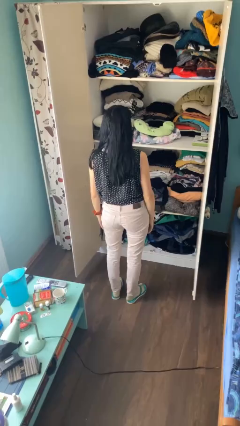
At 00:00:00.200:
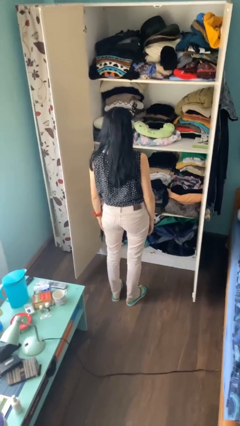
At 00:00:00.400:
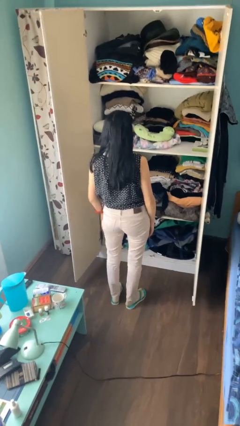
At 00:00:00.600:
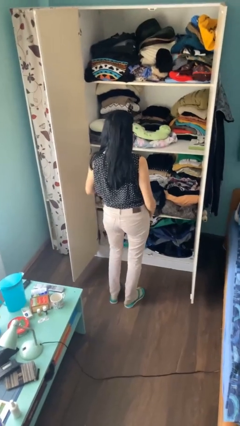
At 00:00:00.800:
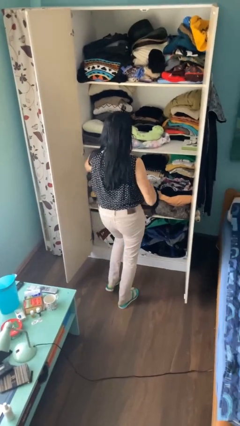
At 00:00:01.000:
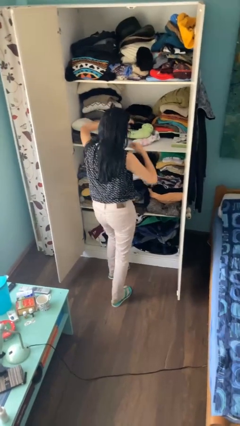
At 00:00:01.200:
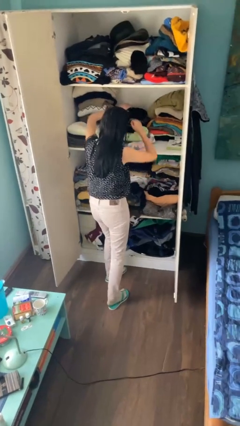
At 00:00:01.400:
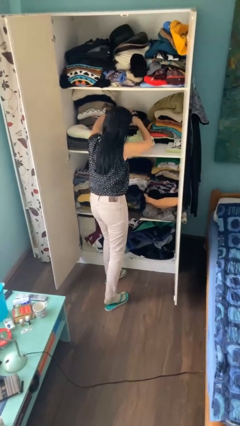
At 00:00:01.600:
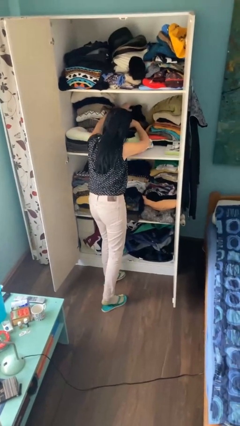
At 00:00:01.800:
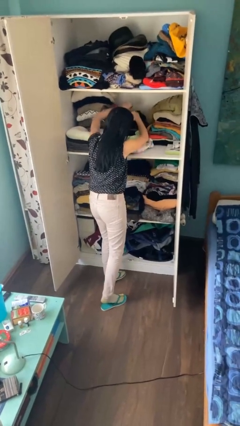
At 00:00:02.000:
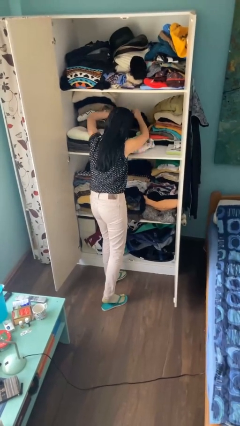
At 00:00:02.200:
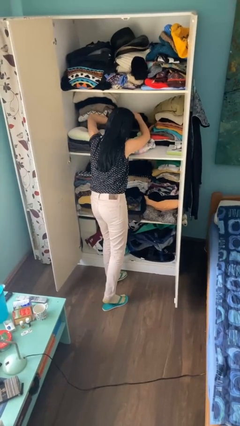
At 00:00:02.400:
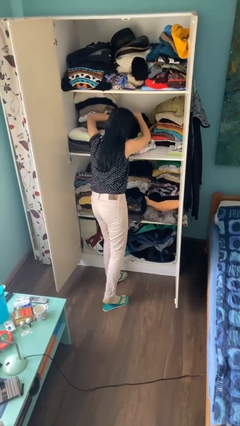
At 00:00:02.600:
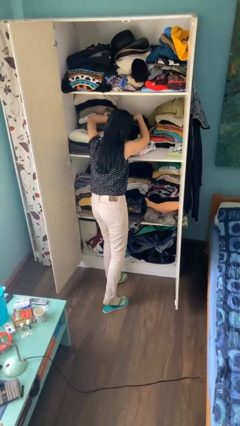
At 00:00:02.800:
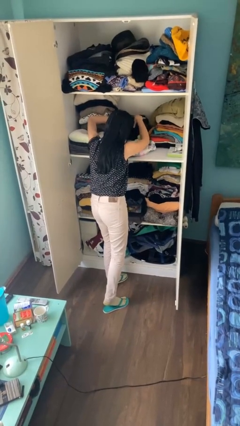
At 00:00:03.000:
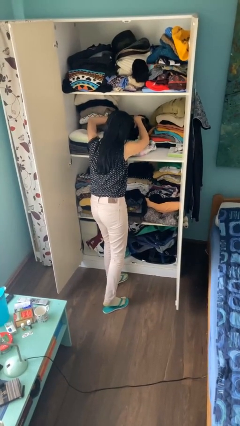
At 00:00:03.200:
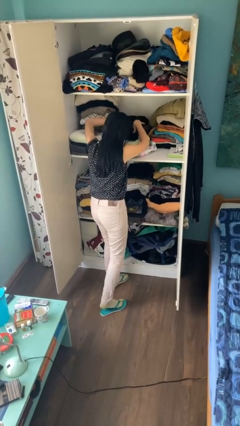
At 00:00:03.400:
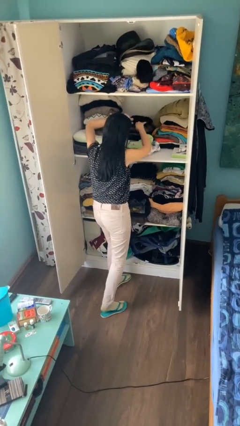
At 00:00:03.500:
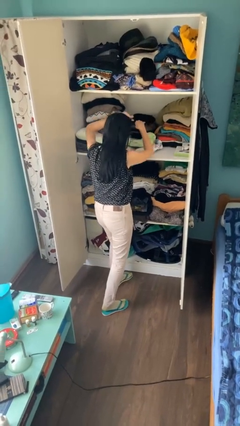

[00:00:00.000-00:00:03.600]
person searches in cabinet

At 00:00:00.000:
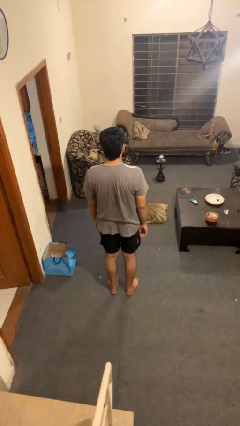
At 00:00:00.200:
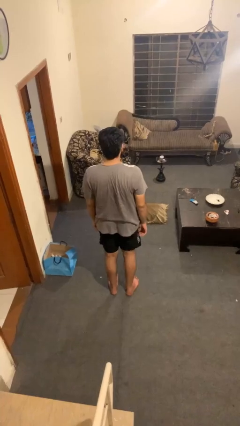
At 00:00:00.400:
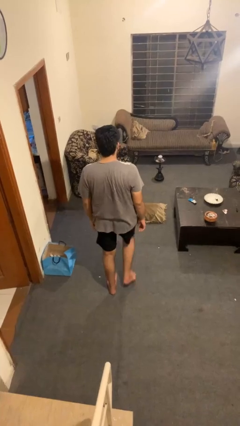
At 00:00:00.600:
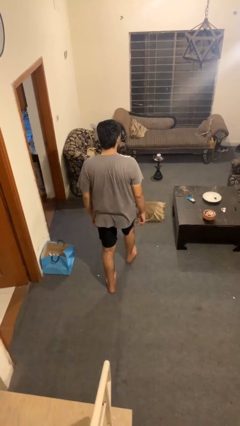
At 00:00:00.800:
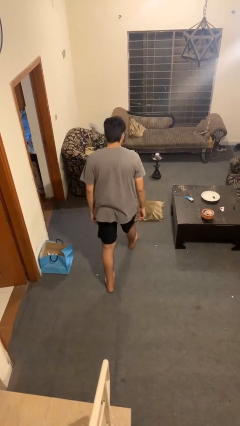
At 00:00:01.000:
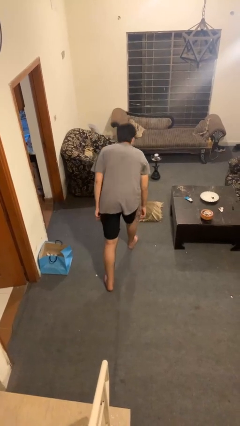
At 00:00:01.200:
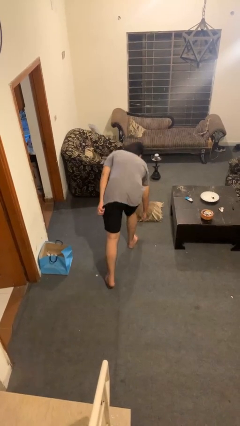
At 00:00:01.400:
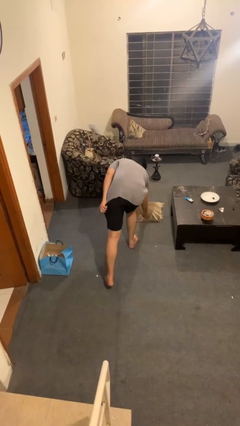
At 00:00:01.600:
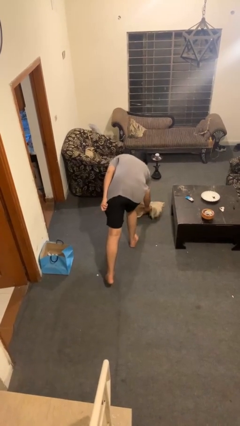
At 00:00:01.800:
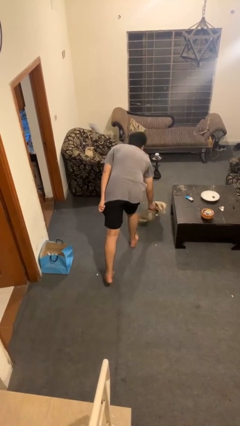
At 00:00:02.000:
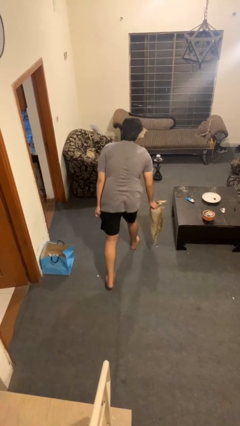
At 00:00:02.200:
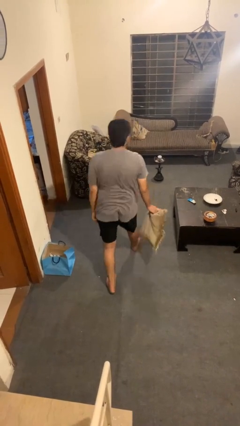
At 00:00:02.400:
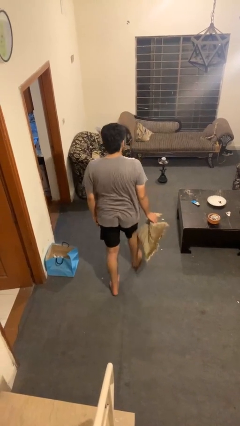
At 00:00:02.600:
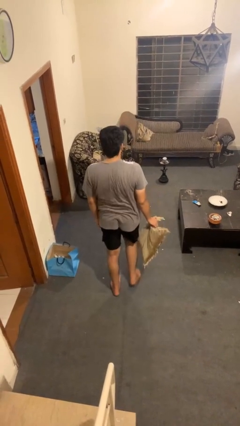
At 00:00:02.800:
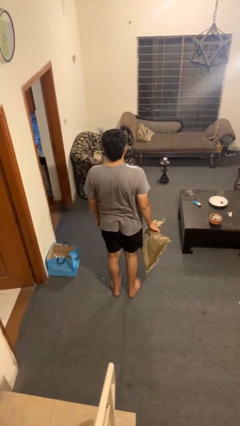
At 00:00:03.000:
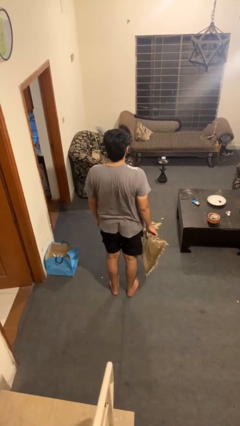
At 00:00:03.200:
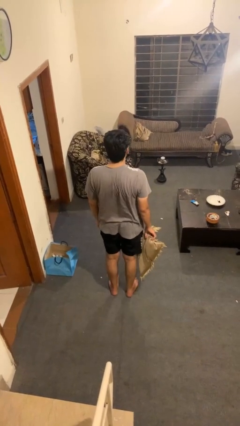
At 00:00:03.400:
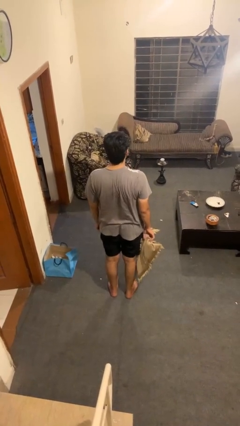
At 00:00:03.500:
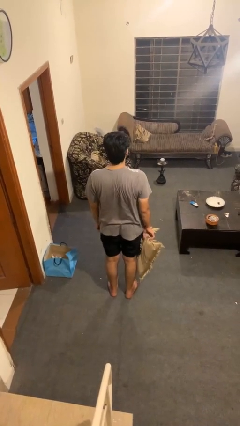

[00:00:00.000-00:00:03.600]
person picks up object from floor

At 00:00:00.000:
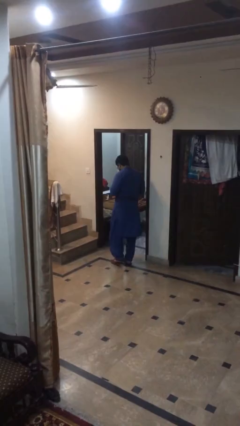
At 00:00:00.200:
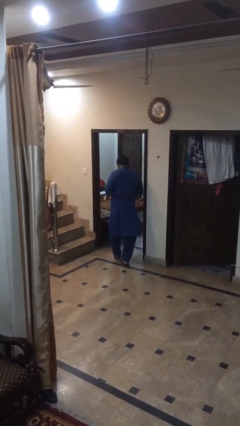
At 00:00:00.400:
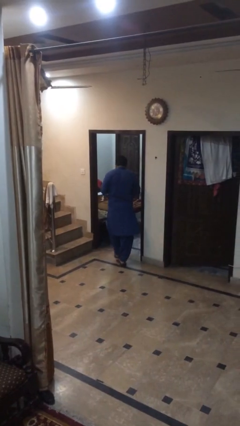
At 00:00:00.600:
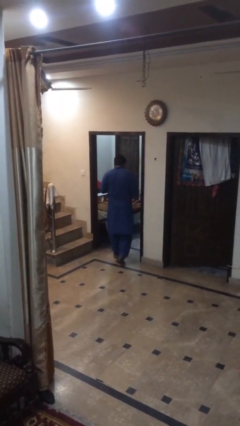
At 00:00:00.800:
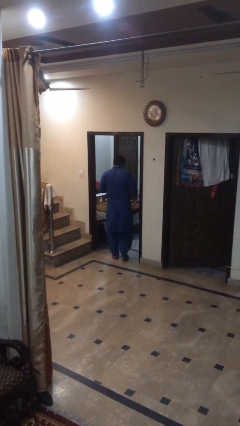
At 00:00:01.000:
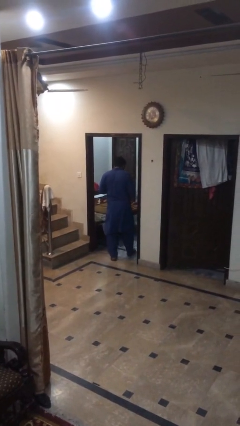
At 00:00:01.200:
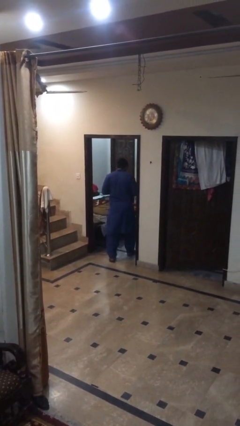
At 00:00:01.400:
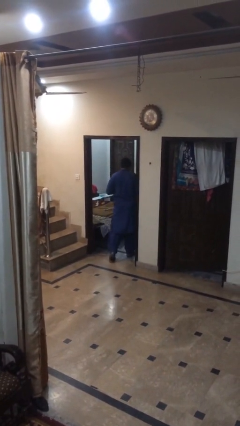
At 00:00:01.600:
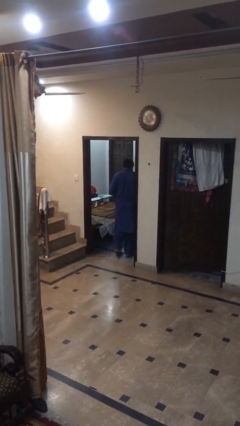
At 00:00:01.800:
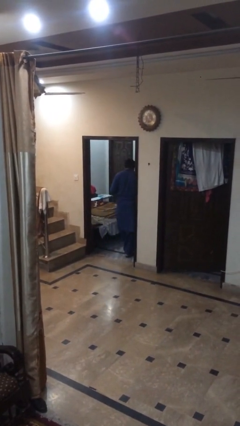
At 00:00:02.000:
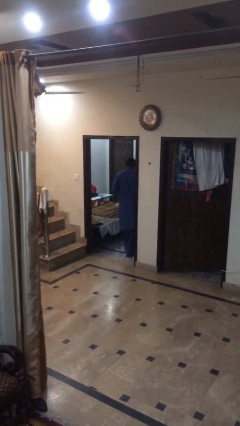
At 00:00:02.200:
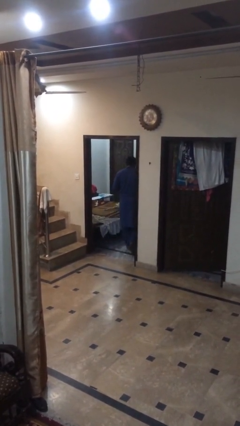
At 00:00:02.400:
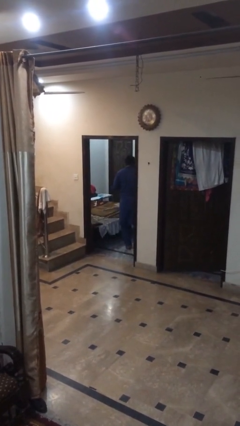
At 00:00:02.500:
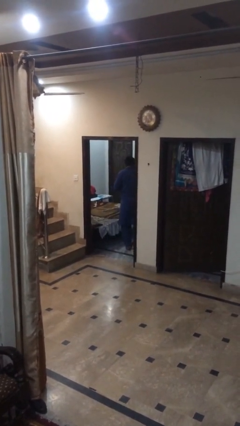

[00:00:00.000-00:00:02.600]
person enters scene through structure

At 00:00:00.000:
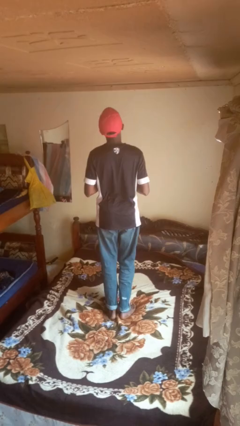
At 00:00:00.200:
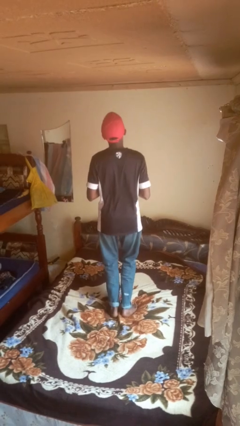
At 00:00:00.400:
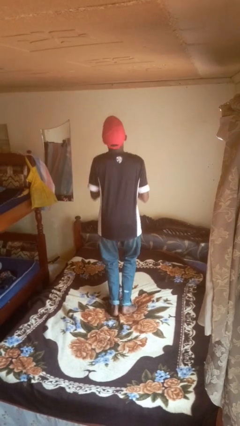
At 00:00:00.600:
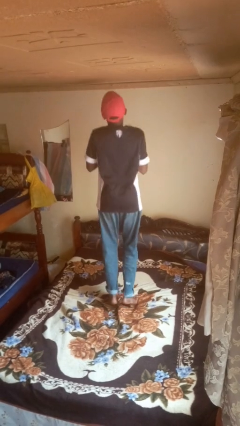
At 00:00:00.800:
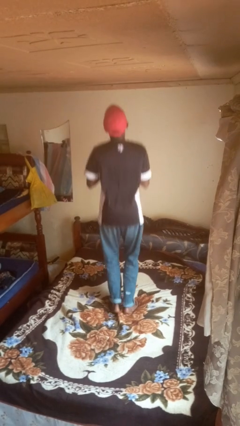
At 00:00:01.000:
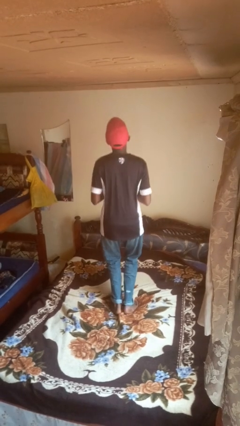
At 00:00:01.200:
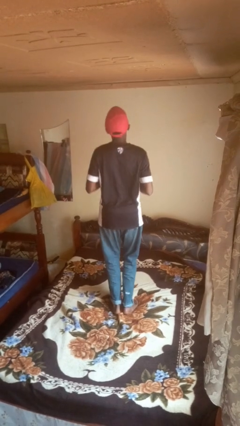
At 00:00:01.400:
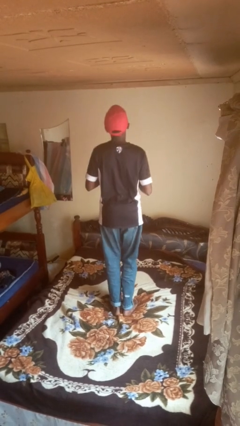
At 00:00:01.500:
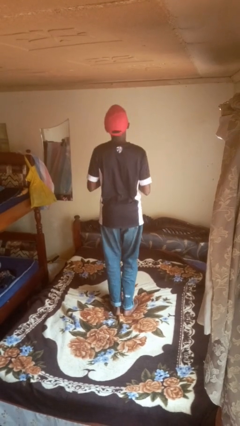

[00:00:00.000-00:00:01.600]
person jumps on bed

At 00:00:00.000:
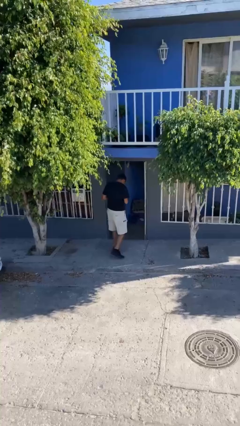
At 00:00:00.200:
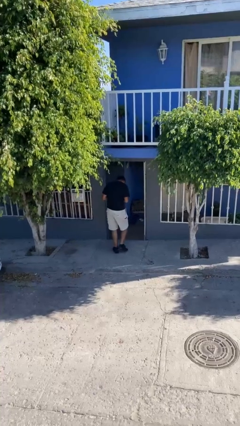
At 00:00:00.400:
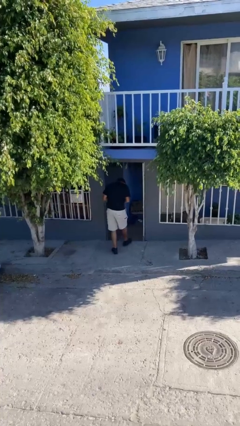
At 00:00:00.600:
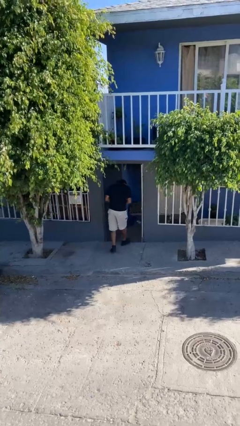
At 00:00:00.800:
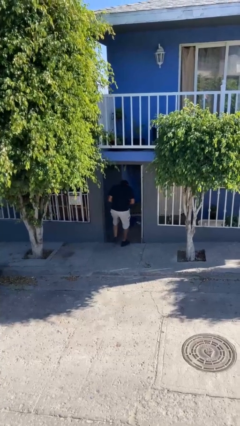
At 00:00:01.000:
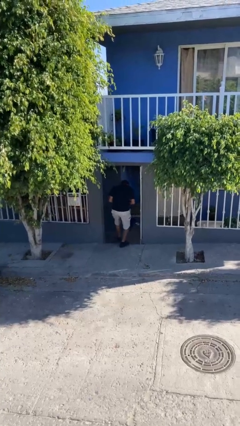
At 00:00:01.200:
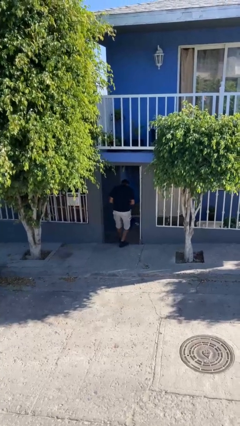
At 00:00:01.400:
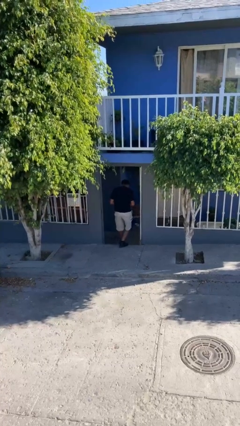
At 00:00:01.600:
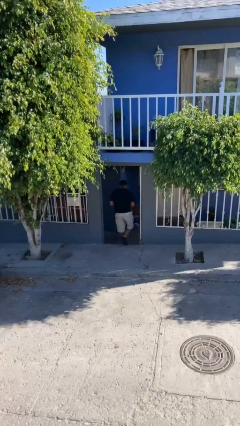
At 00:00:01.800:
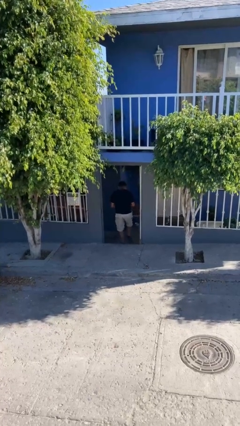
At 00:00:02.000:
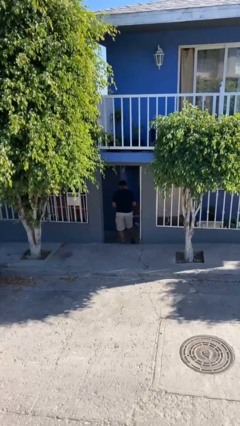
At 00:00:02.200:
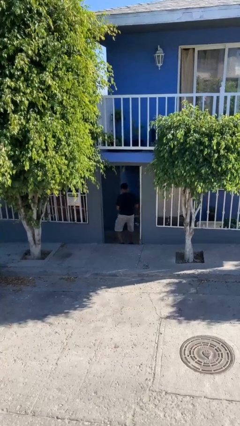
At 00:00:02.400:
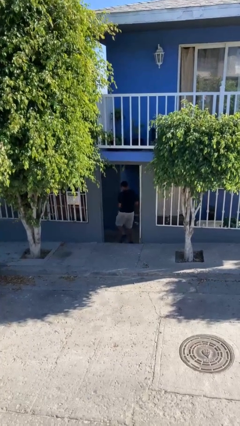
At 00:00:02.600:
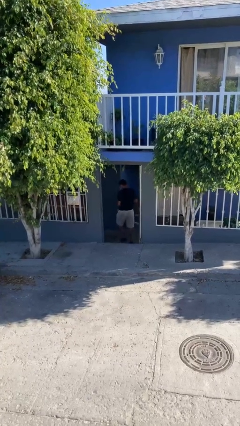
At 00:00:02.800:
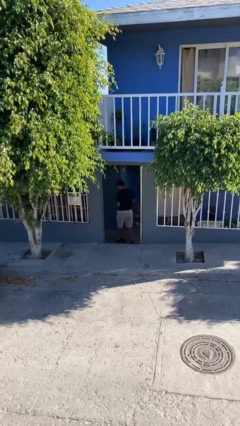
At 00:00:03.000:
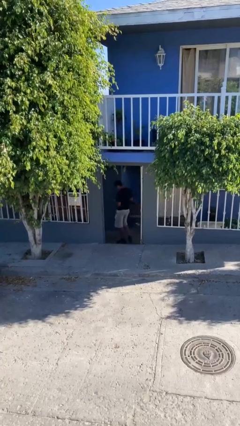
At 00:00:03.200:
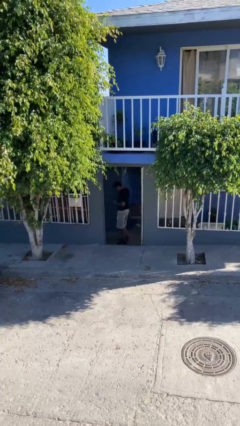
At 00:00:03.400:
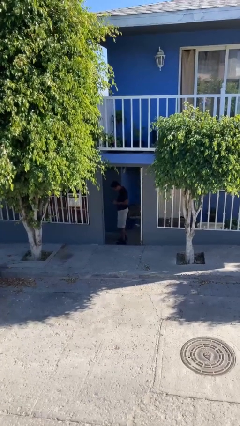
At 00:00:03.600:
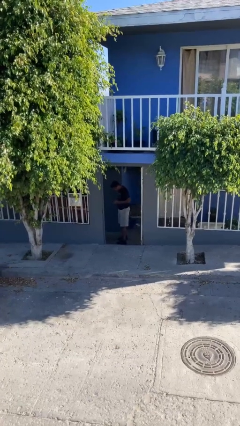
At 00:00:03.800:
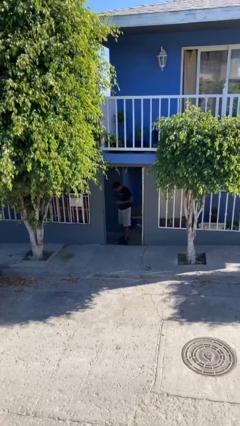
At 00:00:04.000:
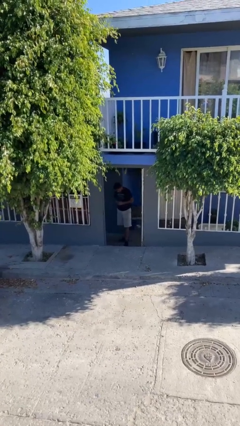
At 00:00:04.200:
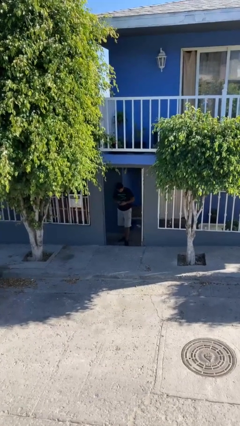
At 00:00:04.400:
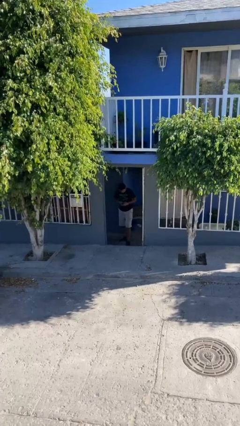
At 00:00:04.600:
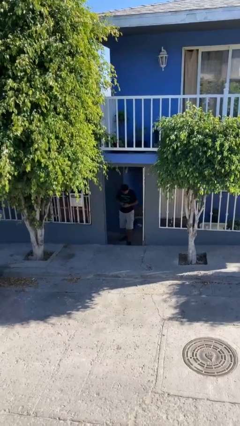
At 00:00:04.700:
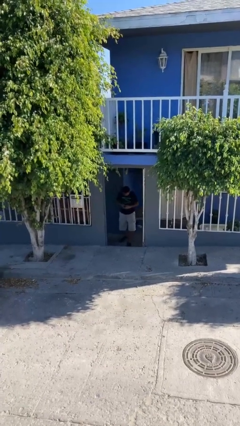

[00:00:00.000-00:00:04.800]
person exits scene through structure

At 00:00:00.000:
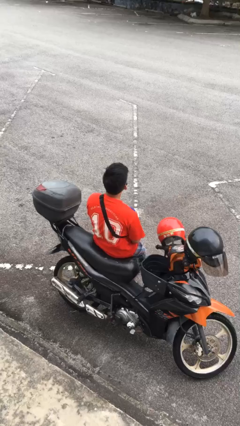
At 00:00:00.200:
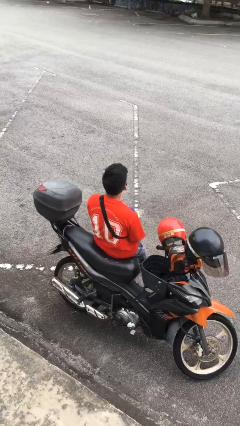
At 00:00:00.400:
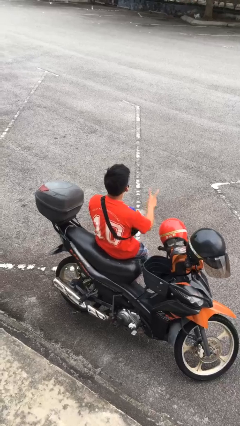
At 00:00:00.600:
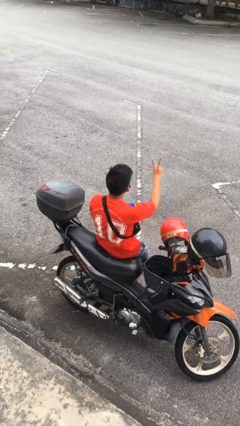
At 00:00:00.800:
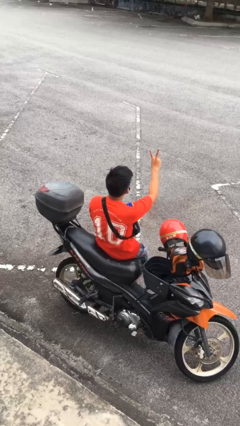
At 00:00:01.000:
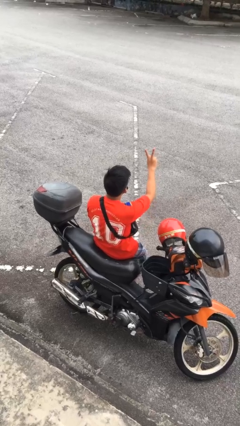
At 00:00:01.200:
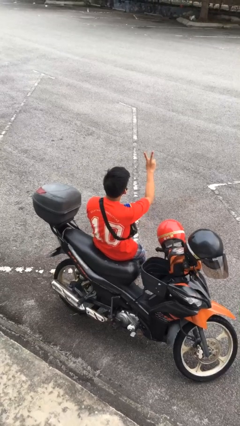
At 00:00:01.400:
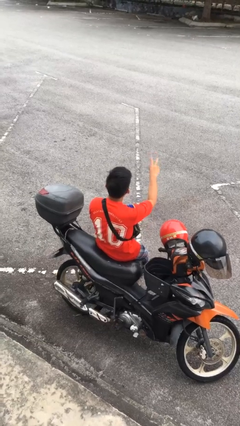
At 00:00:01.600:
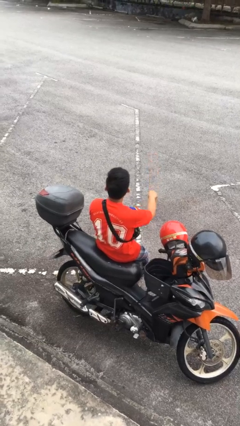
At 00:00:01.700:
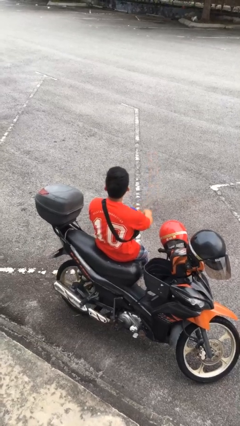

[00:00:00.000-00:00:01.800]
person gestures peace
